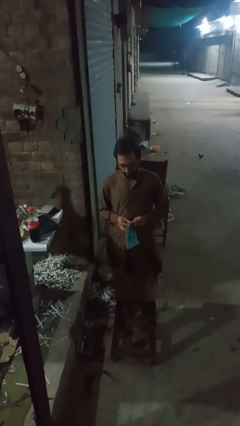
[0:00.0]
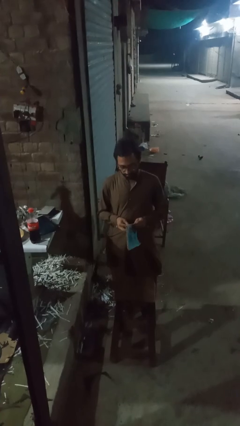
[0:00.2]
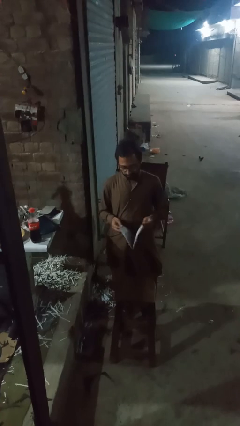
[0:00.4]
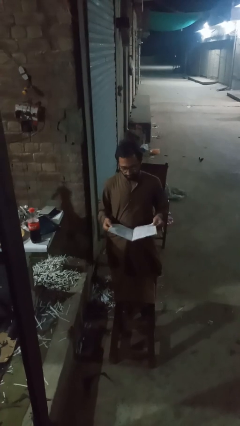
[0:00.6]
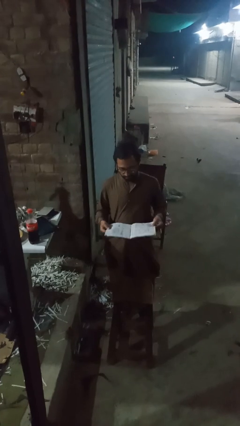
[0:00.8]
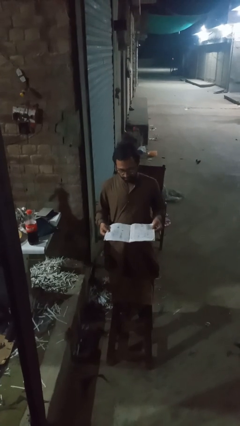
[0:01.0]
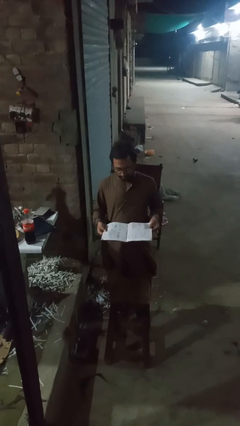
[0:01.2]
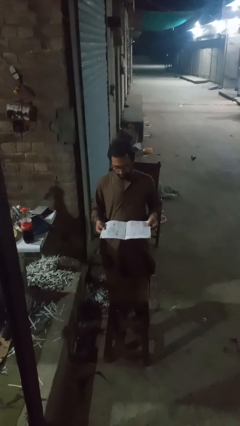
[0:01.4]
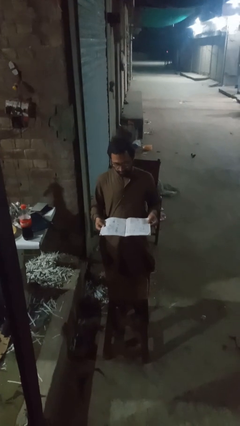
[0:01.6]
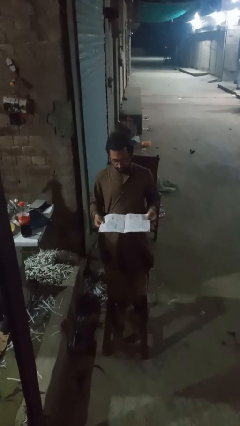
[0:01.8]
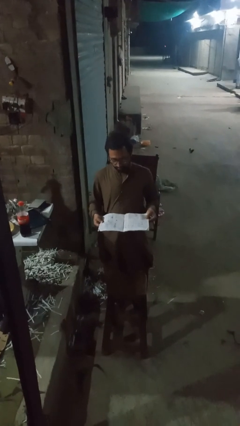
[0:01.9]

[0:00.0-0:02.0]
person reads newspaper

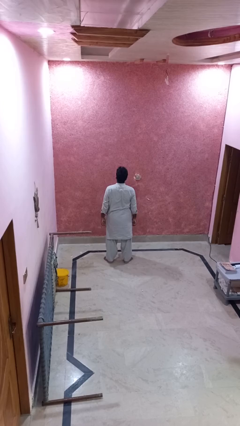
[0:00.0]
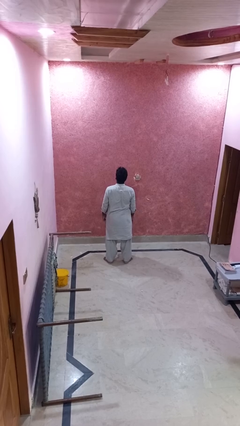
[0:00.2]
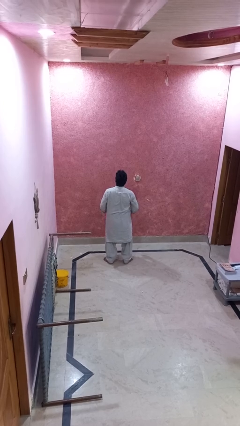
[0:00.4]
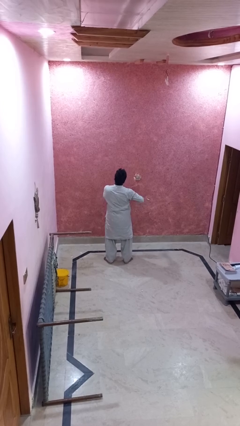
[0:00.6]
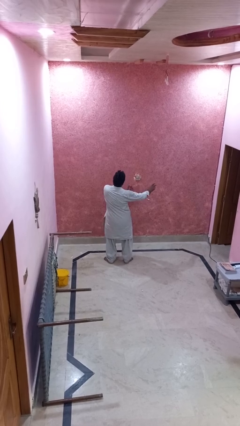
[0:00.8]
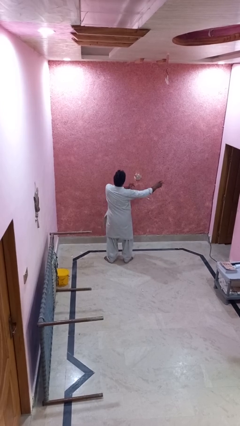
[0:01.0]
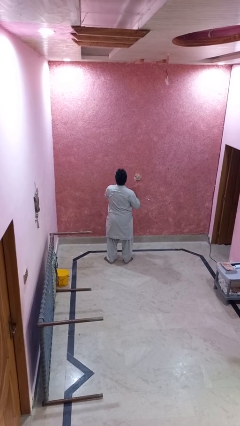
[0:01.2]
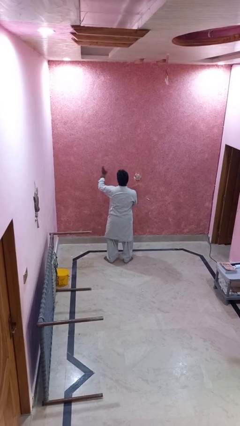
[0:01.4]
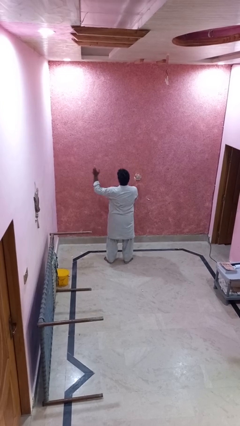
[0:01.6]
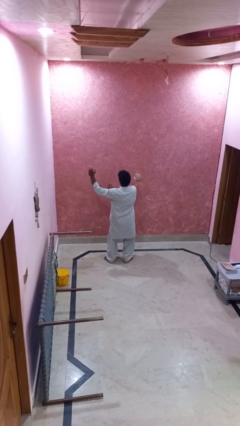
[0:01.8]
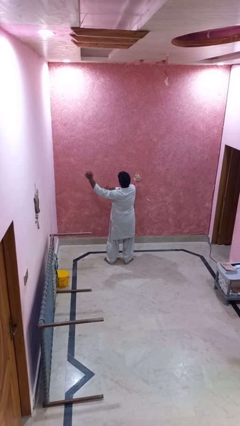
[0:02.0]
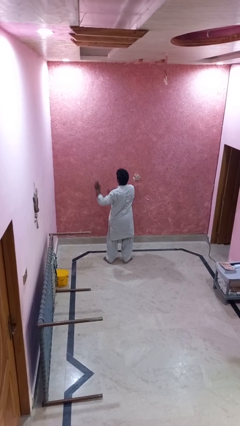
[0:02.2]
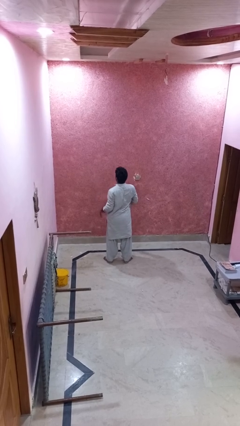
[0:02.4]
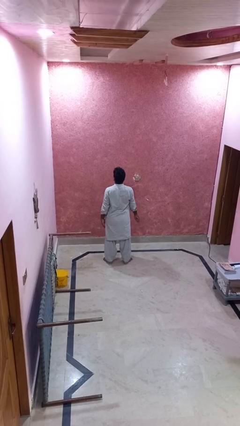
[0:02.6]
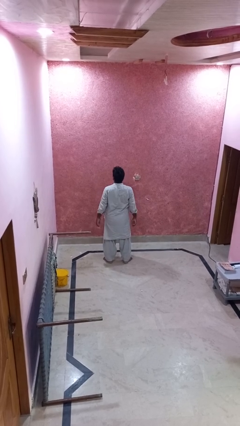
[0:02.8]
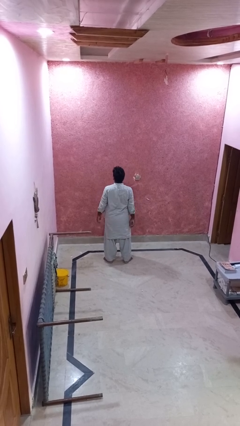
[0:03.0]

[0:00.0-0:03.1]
person dances in place

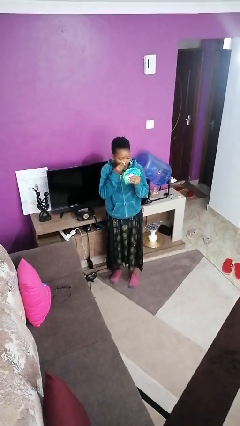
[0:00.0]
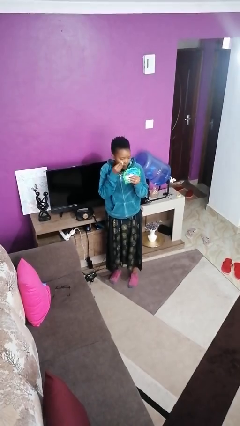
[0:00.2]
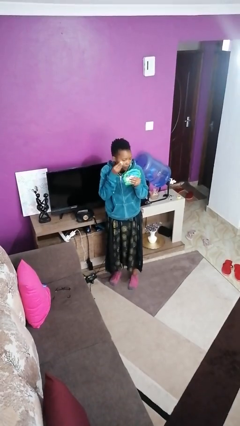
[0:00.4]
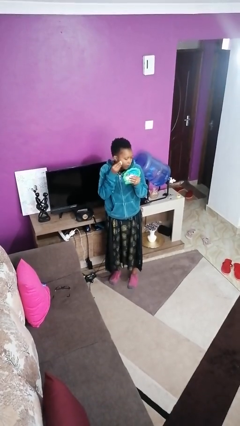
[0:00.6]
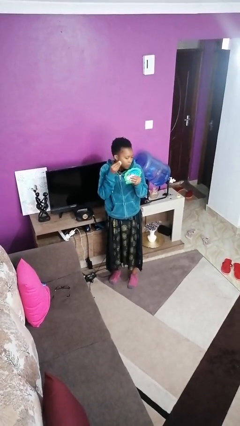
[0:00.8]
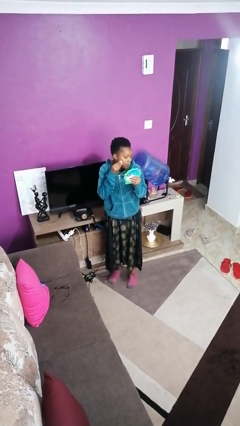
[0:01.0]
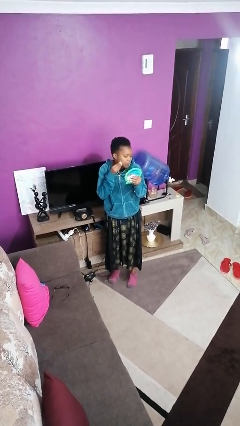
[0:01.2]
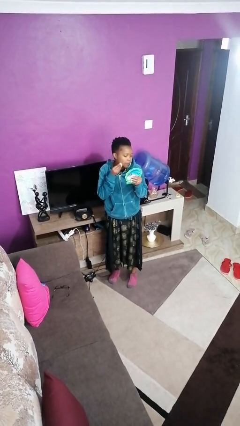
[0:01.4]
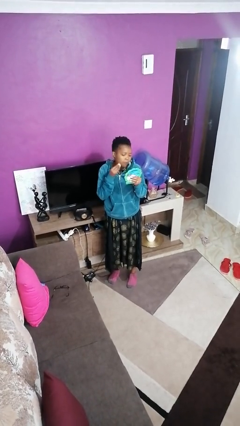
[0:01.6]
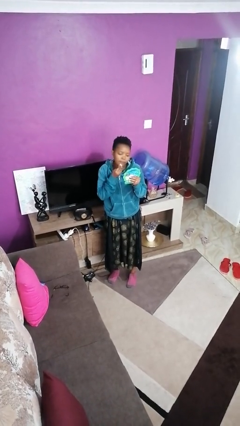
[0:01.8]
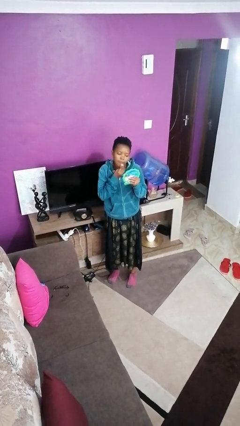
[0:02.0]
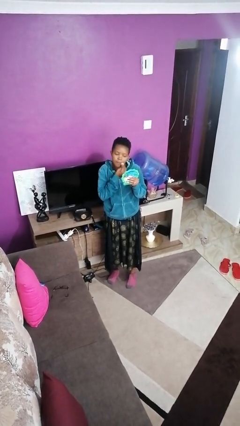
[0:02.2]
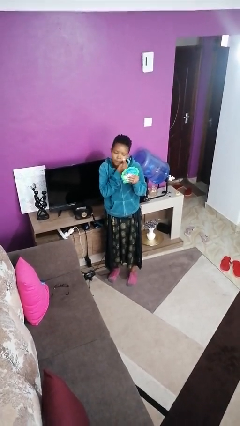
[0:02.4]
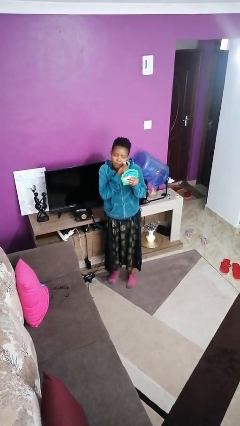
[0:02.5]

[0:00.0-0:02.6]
person applies foundation makeup

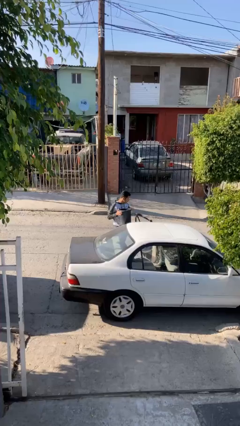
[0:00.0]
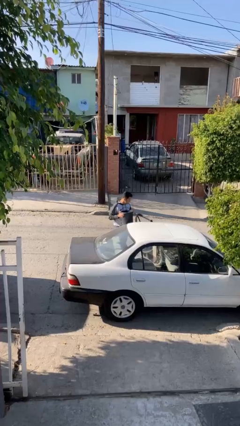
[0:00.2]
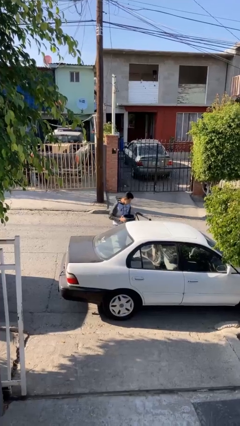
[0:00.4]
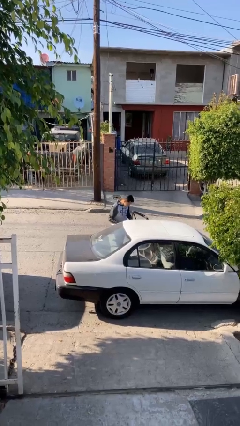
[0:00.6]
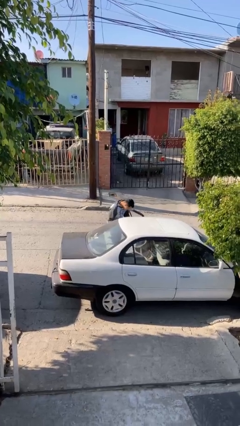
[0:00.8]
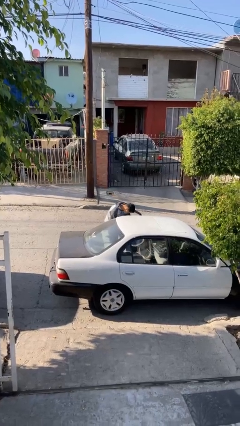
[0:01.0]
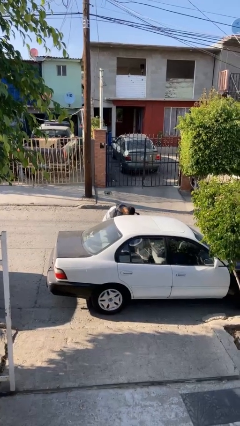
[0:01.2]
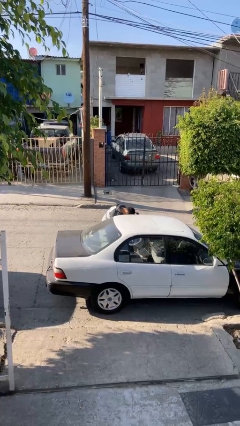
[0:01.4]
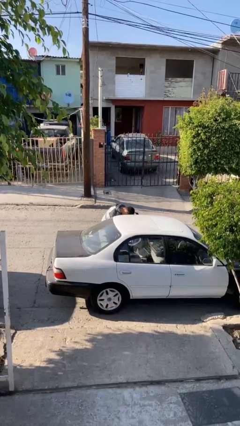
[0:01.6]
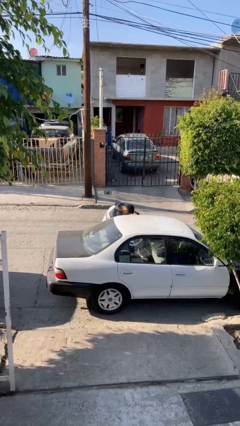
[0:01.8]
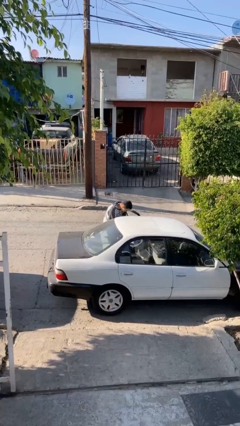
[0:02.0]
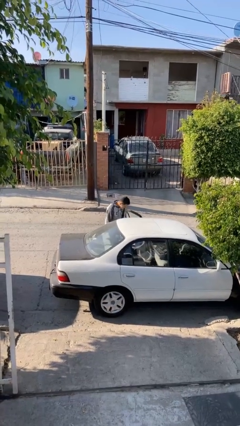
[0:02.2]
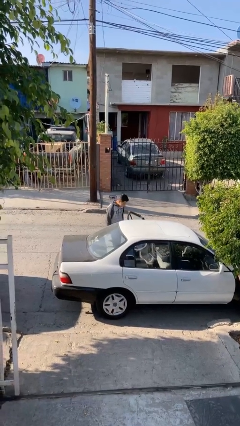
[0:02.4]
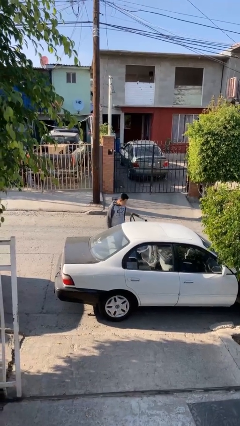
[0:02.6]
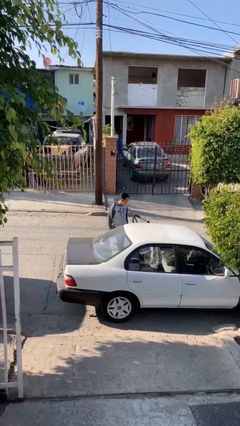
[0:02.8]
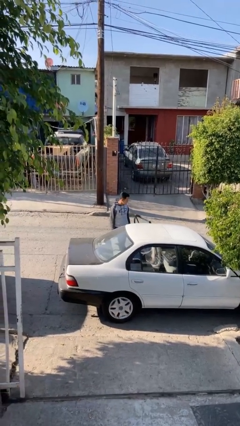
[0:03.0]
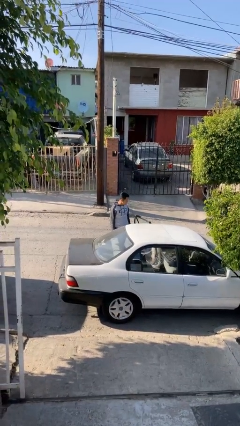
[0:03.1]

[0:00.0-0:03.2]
person loads car

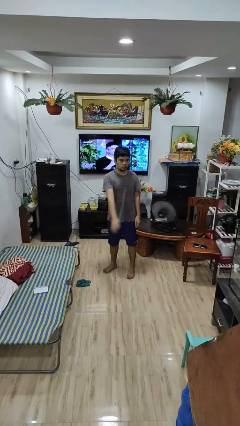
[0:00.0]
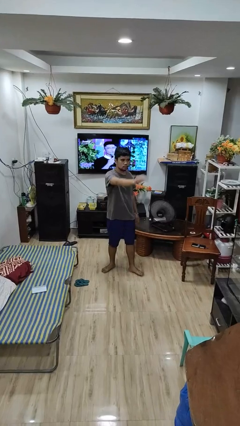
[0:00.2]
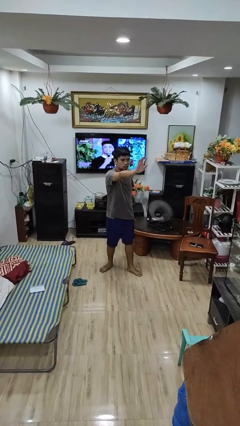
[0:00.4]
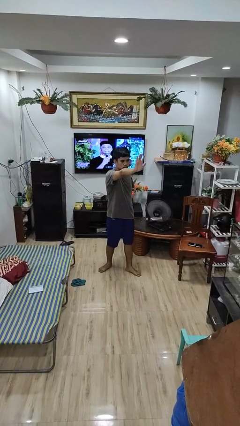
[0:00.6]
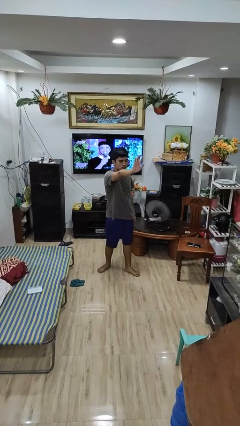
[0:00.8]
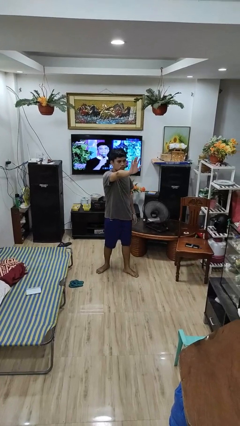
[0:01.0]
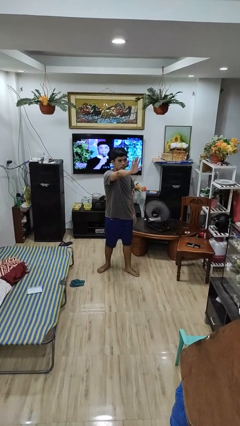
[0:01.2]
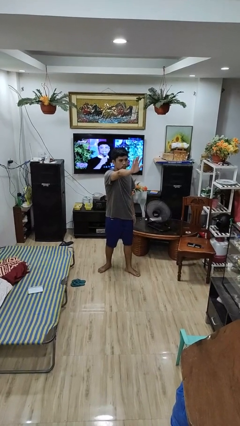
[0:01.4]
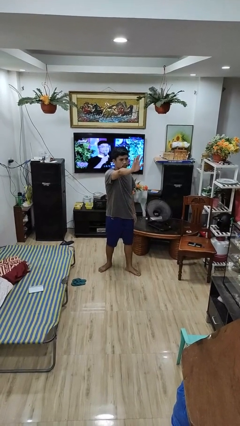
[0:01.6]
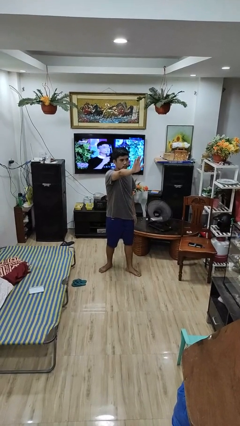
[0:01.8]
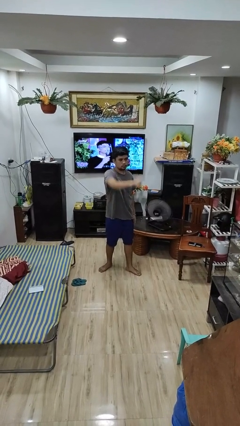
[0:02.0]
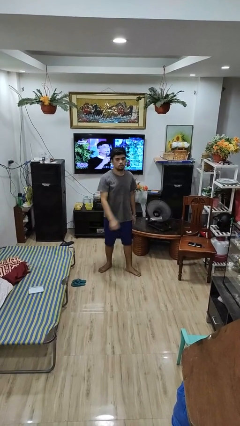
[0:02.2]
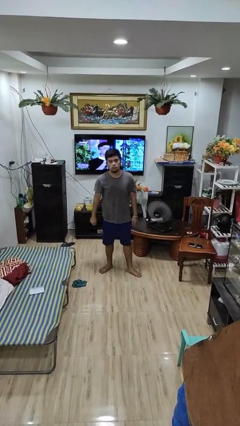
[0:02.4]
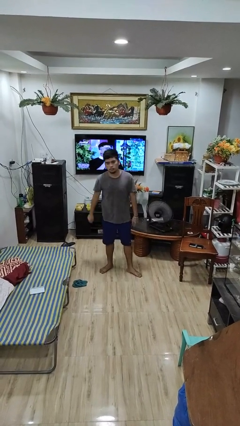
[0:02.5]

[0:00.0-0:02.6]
person gestures stop

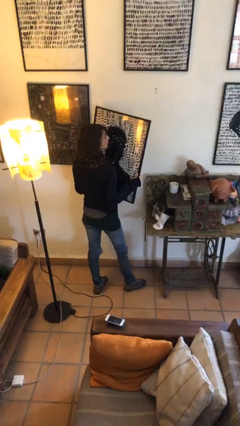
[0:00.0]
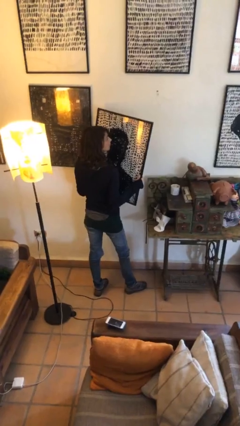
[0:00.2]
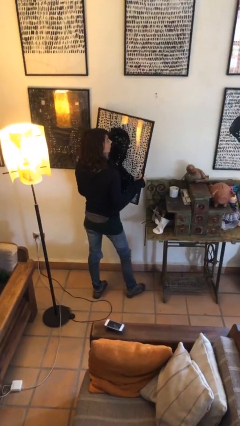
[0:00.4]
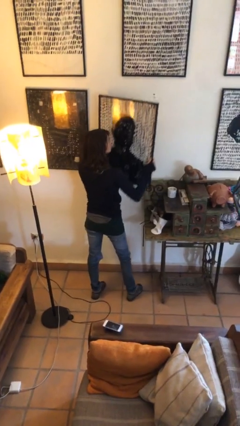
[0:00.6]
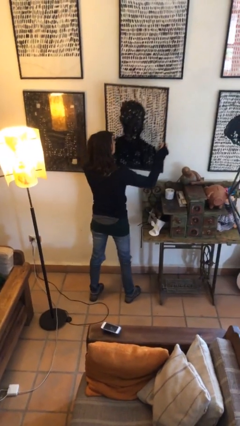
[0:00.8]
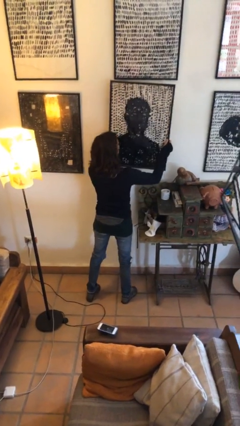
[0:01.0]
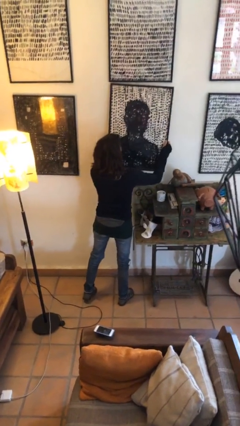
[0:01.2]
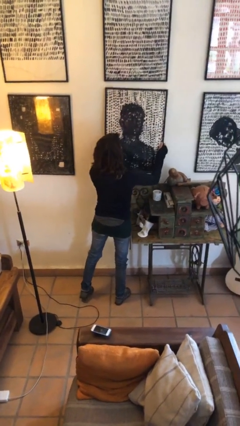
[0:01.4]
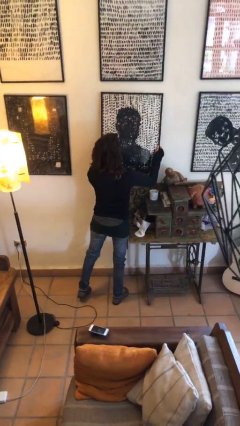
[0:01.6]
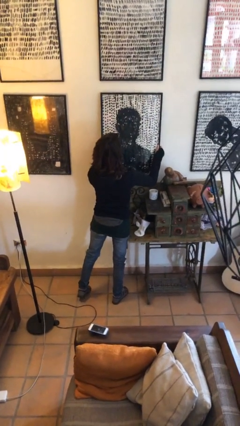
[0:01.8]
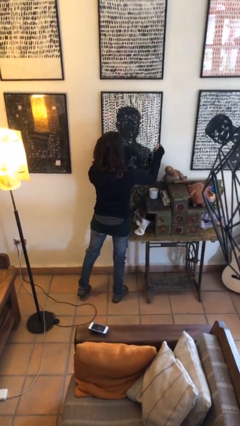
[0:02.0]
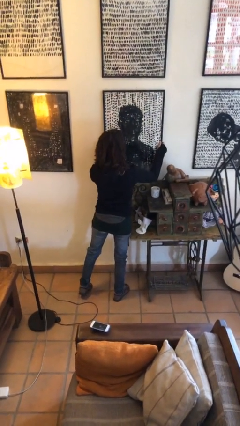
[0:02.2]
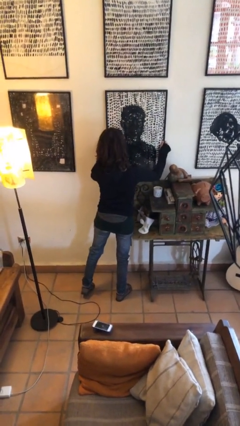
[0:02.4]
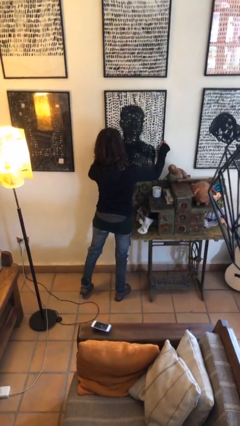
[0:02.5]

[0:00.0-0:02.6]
person puts up picture frame

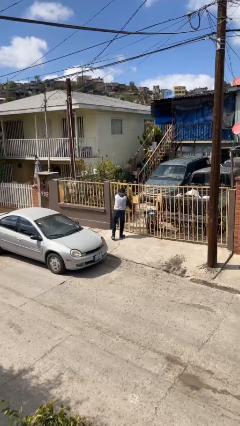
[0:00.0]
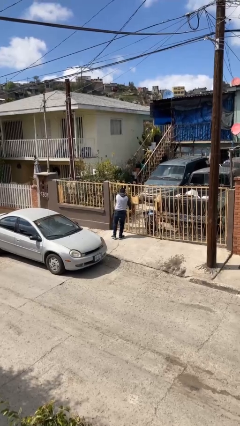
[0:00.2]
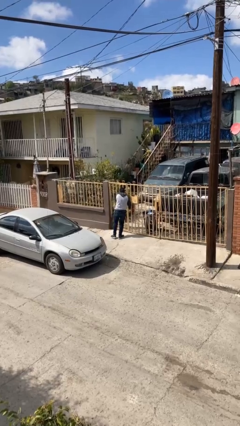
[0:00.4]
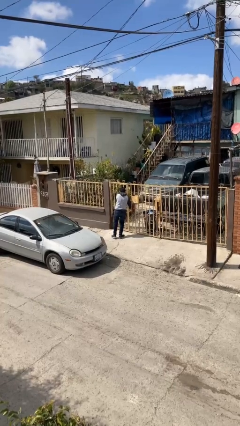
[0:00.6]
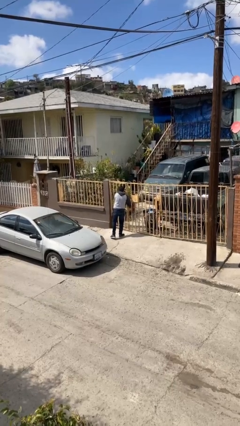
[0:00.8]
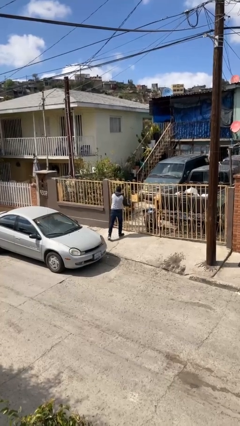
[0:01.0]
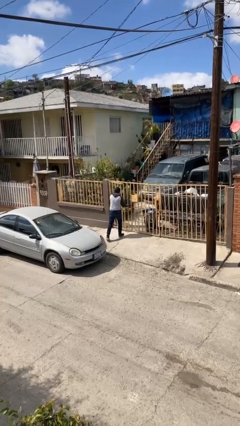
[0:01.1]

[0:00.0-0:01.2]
person opens facility door
